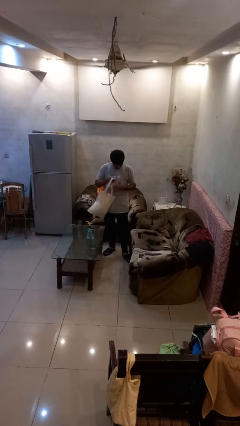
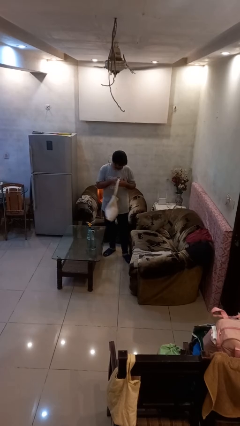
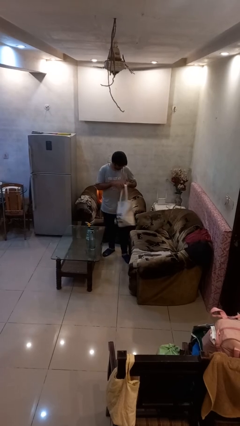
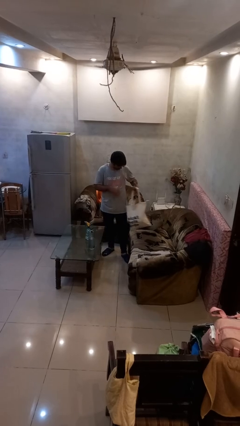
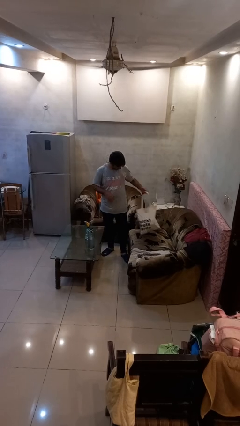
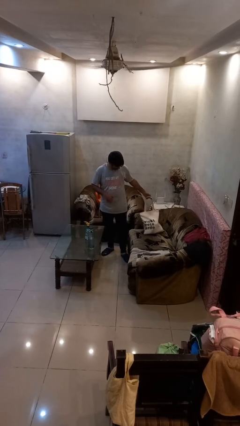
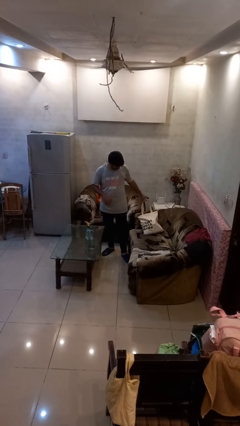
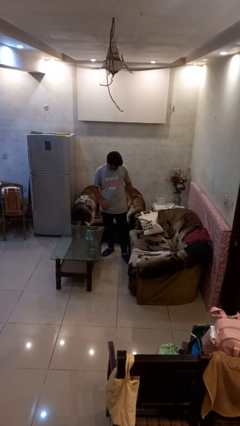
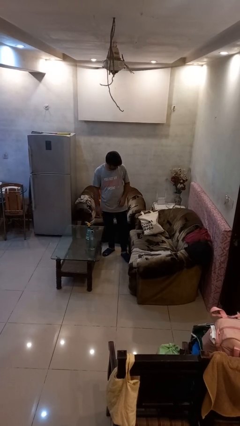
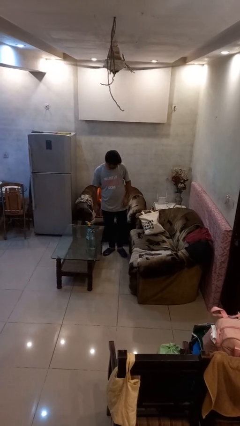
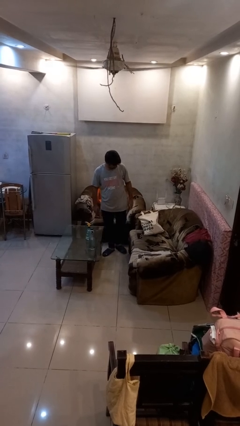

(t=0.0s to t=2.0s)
person puts down object on couch

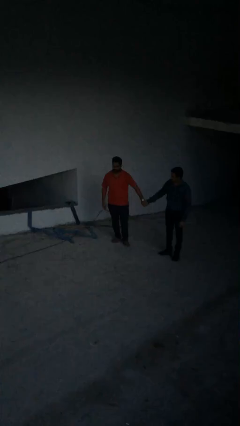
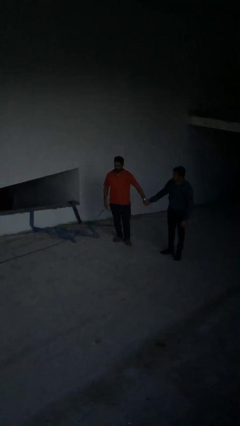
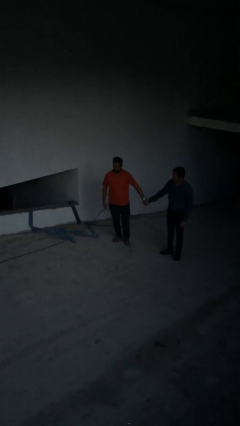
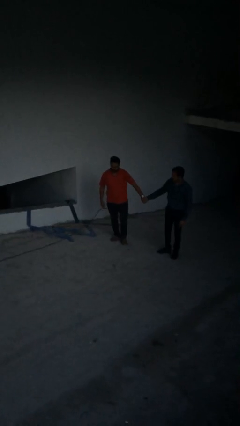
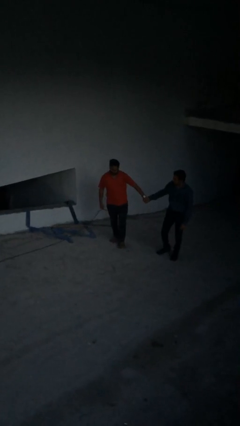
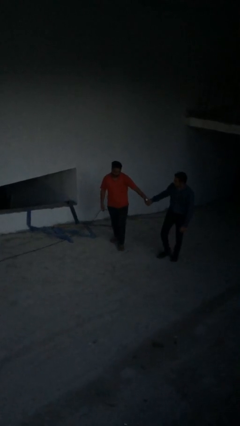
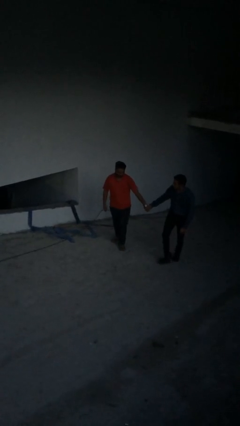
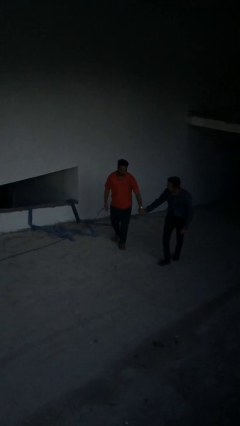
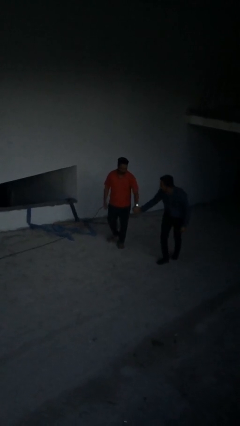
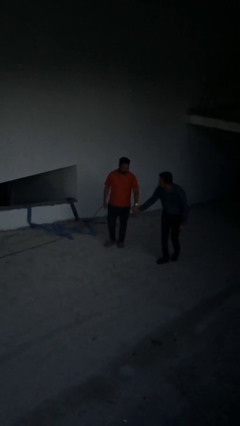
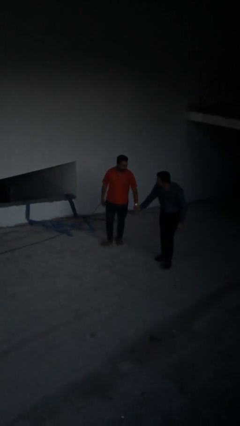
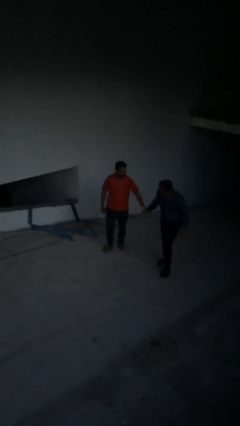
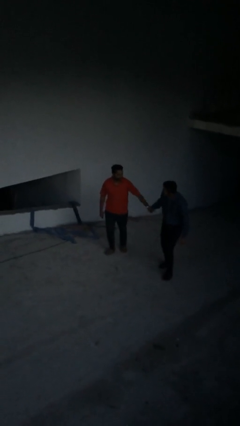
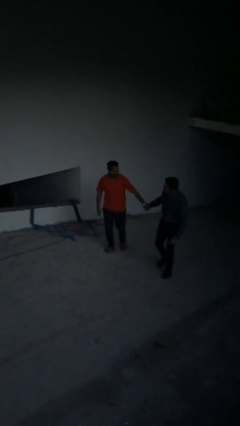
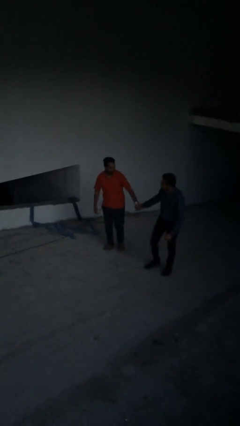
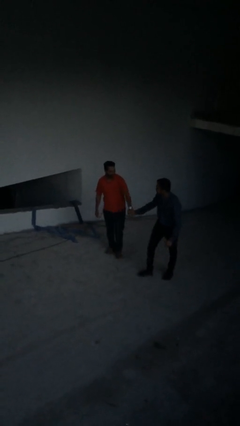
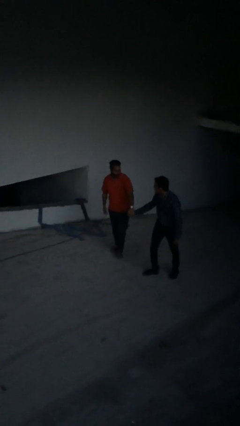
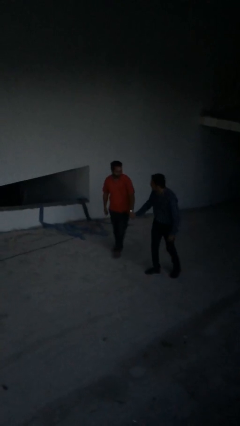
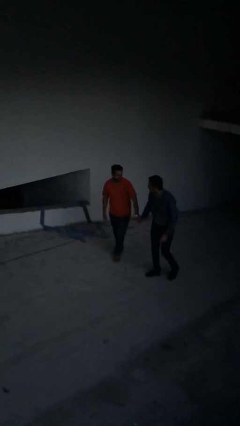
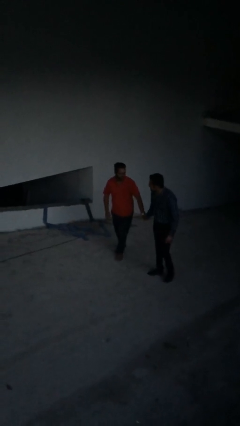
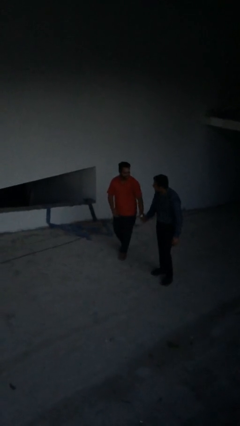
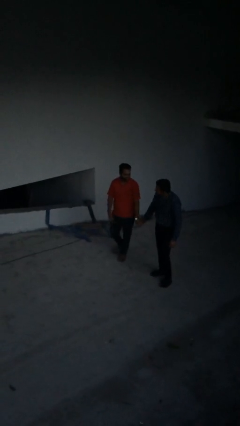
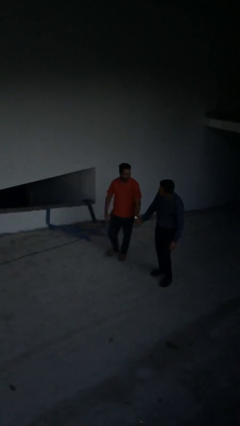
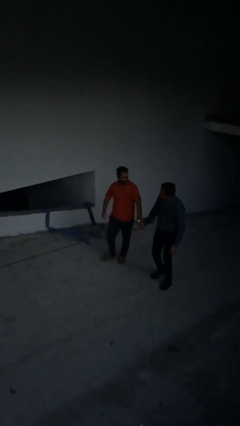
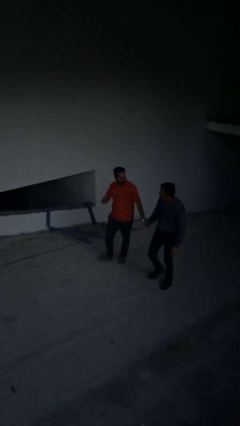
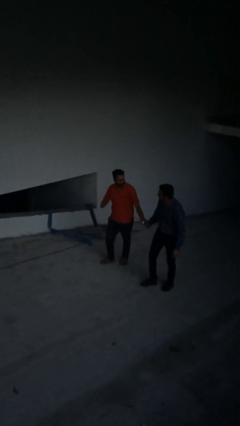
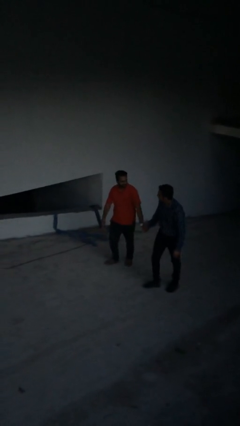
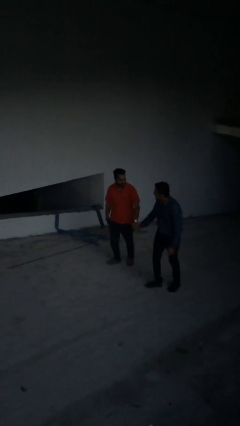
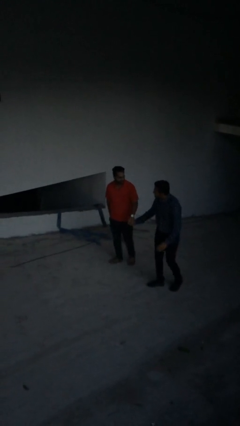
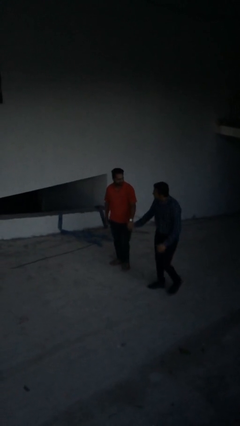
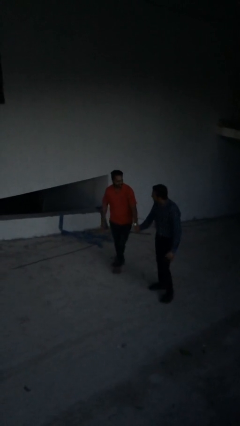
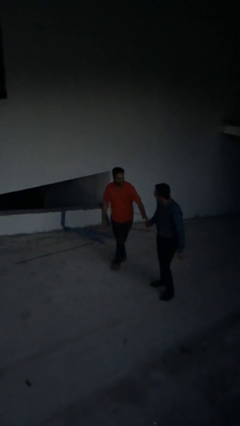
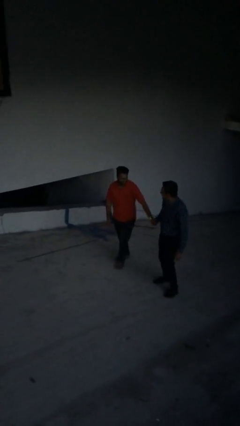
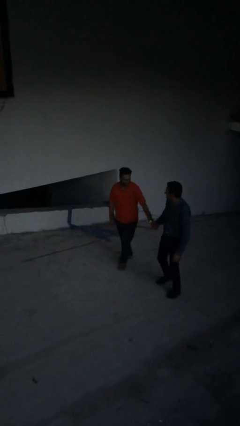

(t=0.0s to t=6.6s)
person holds hand

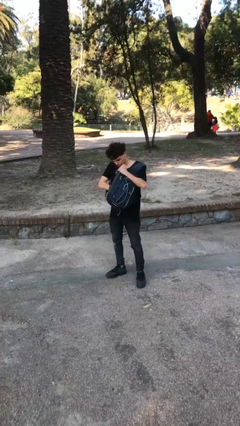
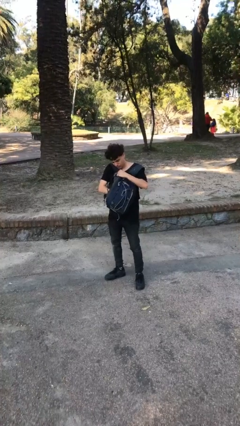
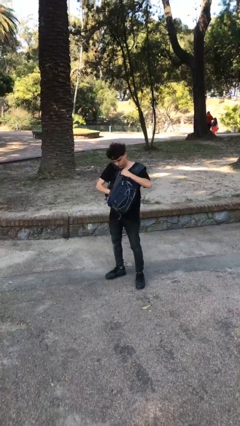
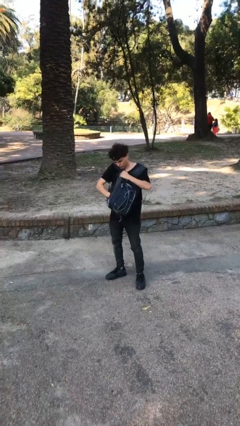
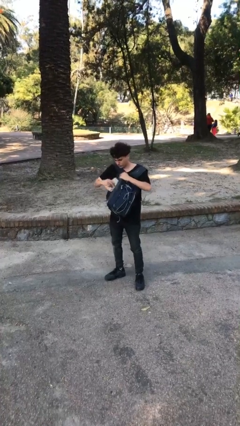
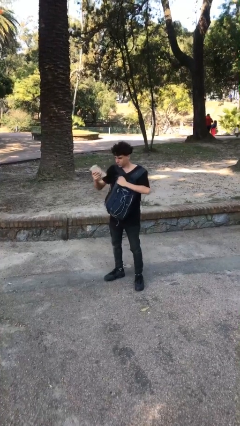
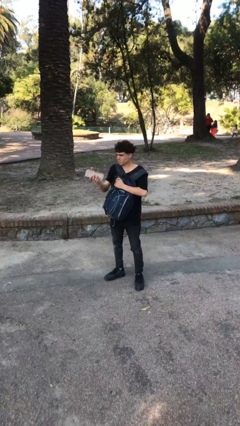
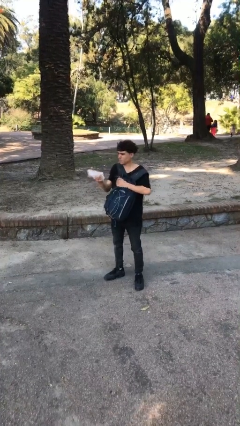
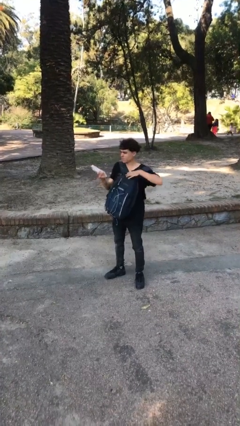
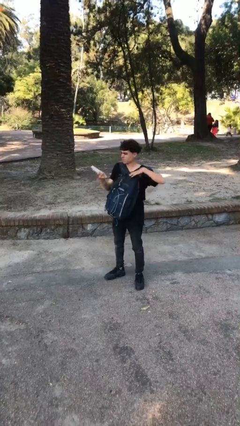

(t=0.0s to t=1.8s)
person takes object from backpack

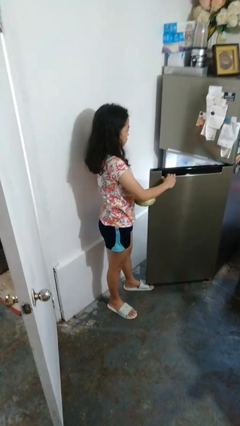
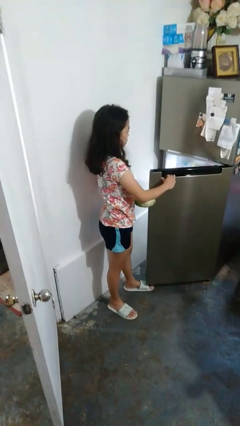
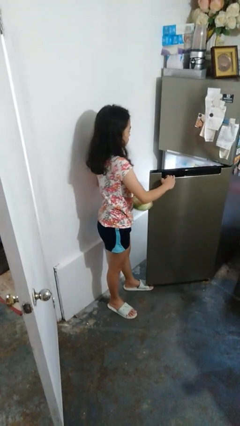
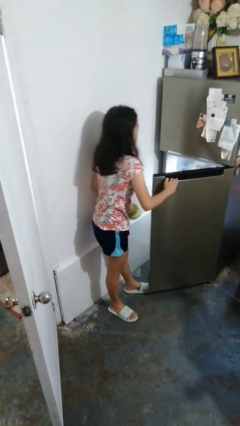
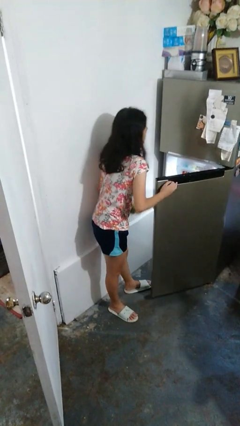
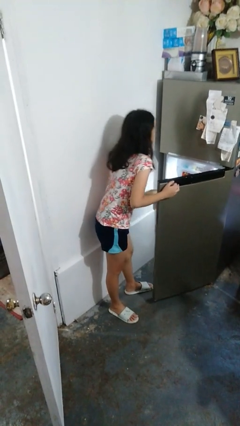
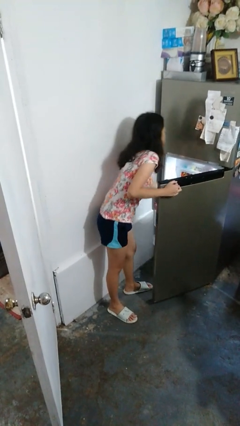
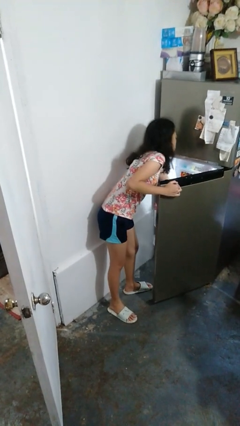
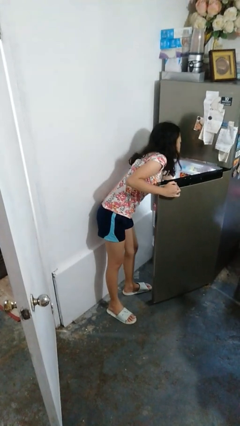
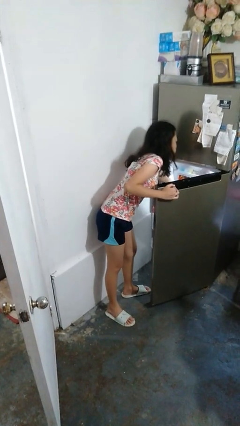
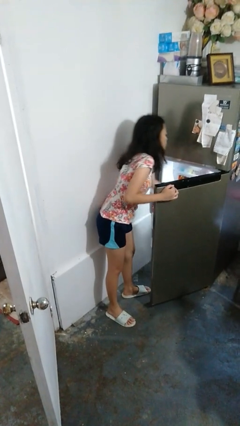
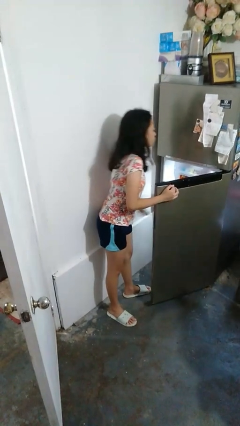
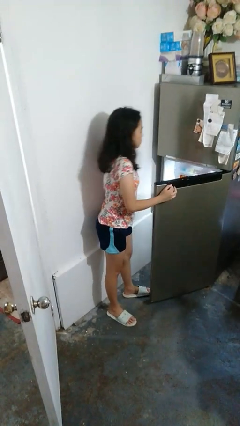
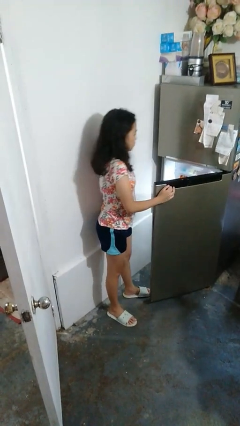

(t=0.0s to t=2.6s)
person puts object into refrigerator

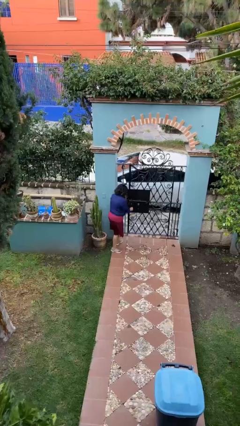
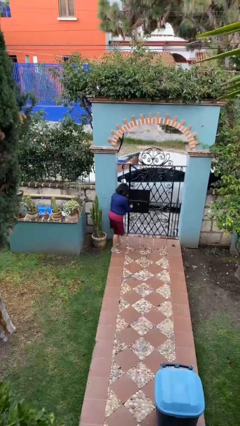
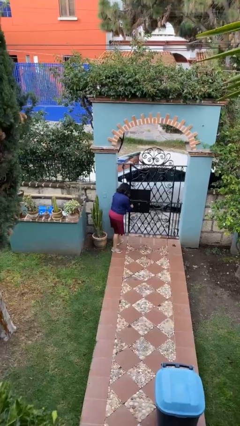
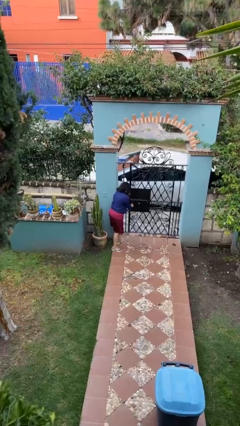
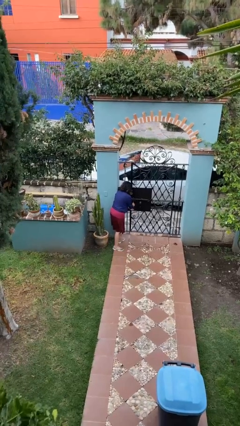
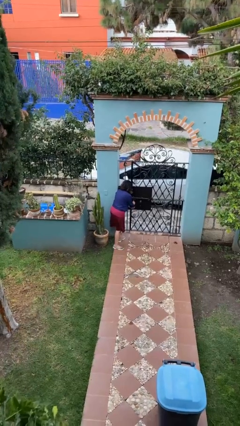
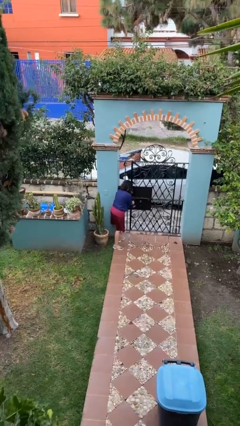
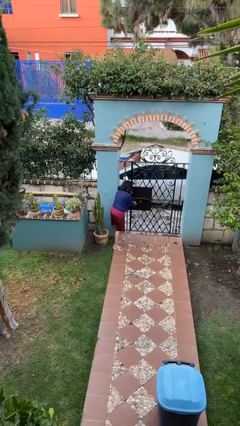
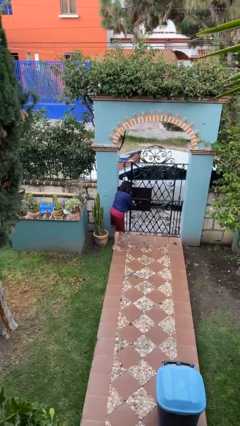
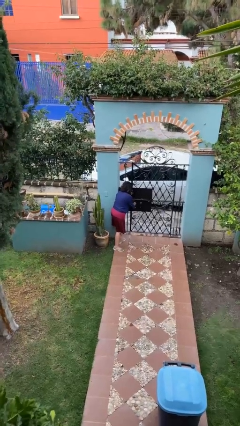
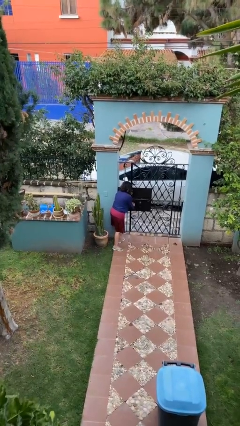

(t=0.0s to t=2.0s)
person unlocks door with keys

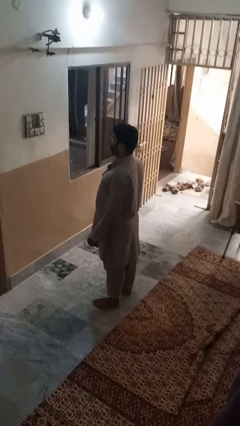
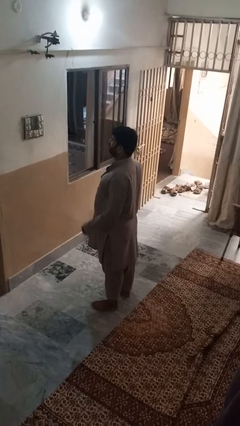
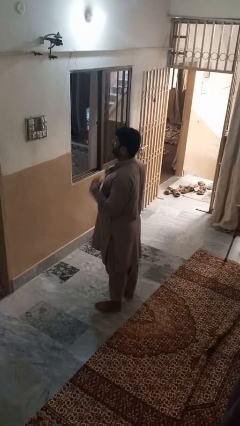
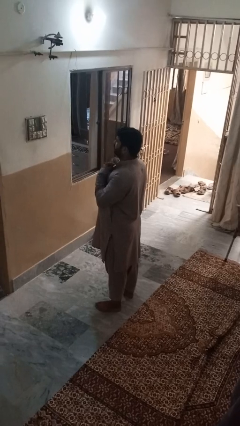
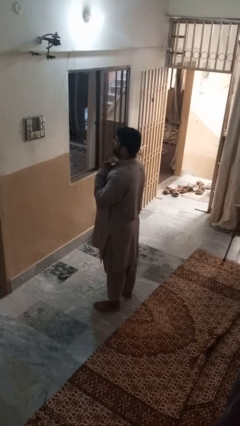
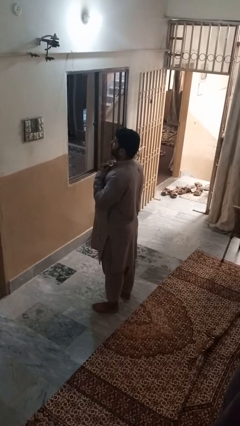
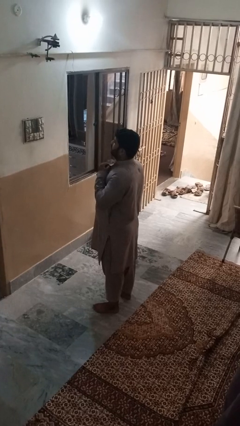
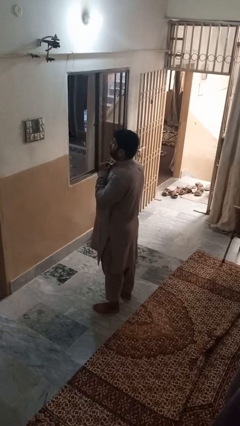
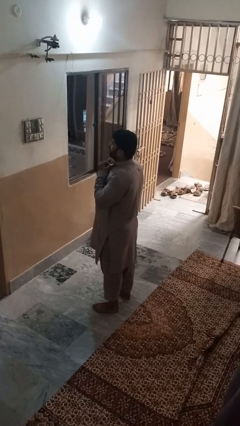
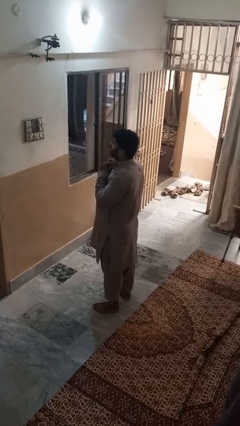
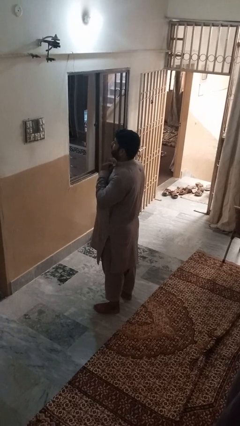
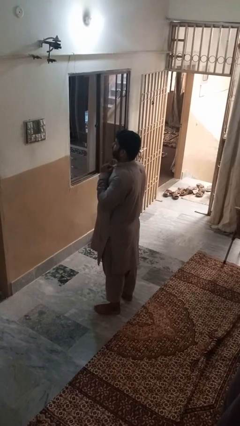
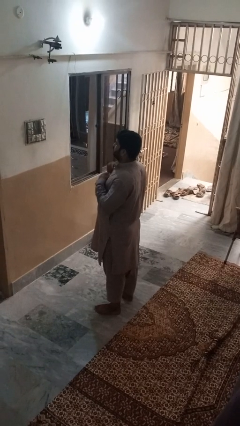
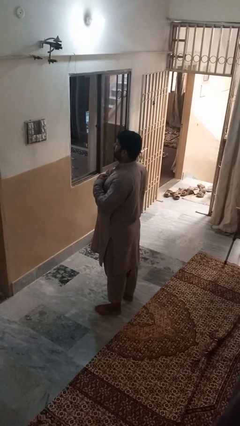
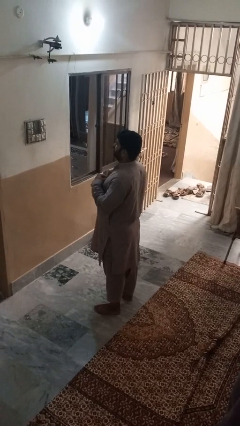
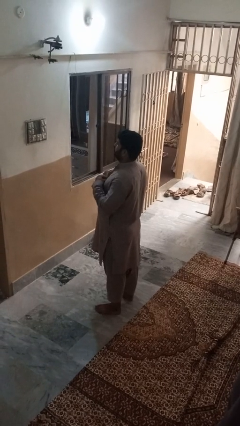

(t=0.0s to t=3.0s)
person buttons shirt
